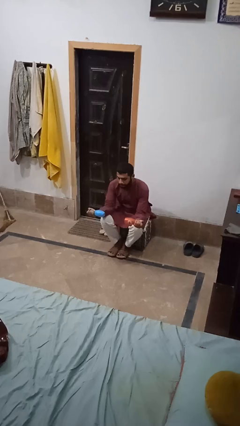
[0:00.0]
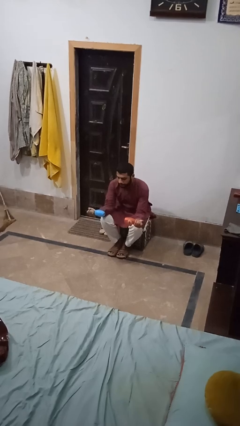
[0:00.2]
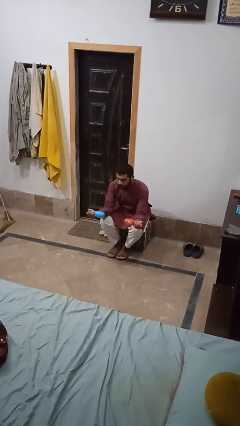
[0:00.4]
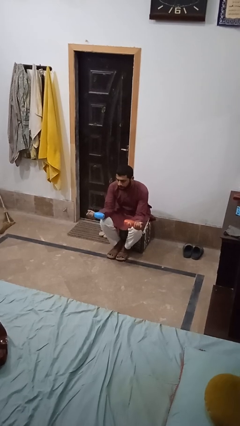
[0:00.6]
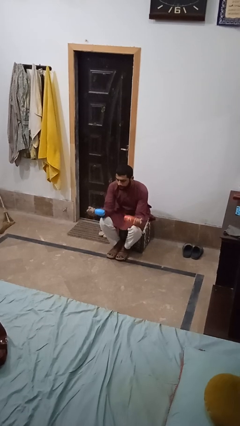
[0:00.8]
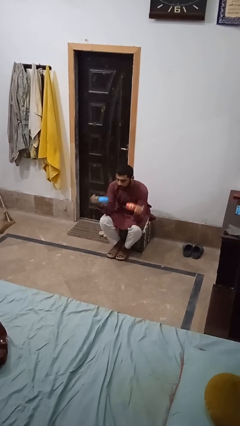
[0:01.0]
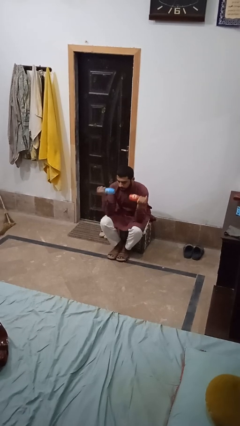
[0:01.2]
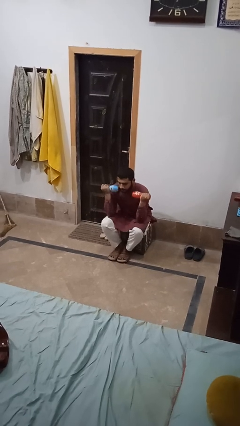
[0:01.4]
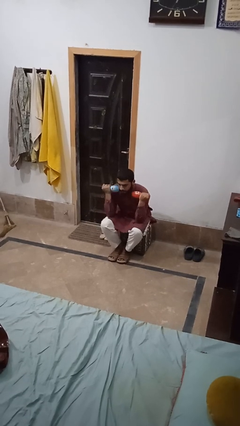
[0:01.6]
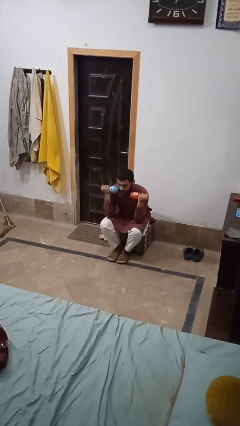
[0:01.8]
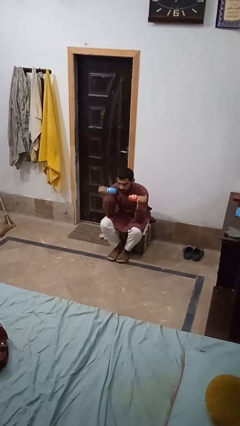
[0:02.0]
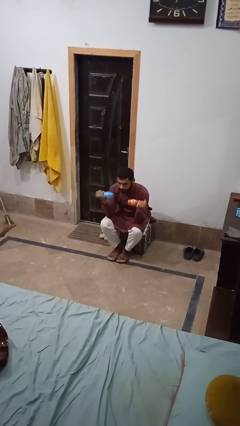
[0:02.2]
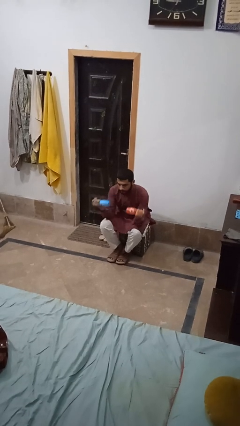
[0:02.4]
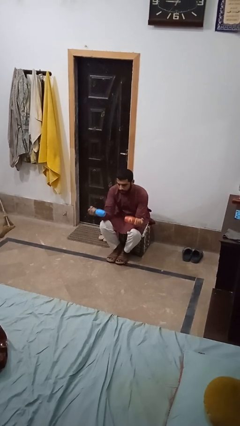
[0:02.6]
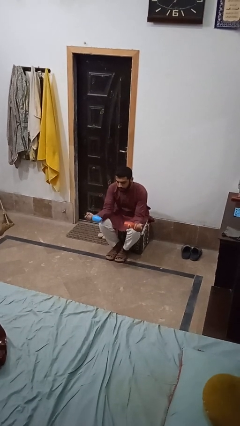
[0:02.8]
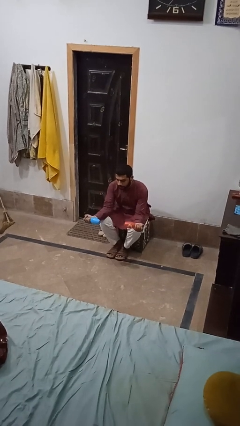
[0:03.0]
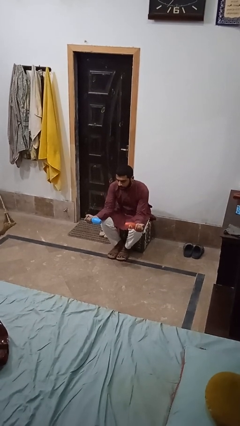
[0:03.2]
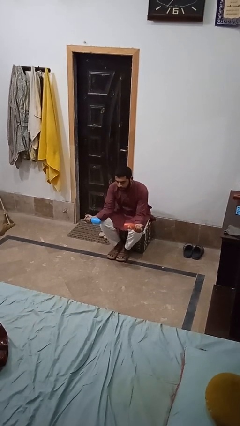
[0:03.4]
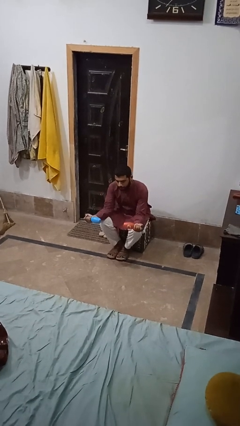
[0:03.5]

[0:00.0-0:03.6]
person lifts dumbbells

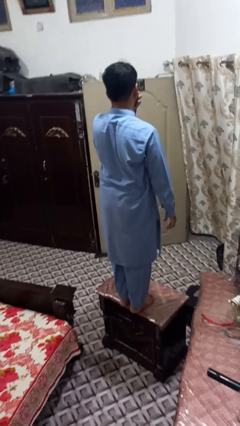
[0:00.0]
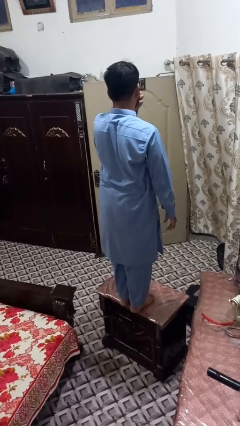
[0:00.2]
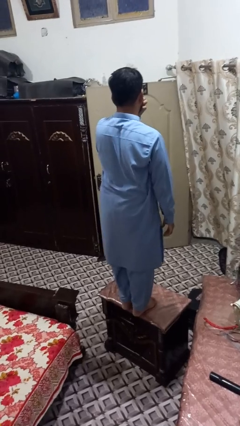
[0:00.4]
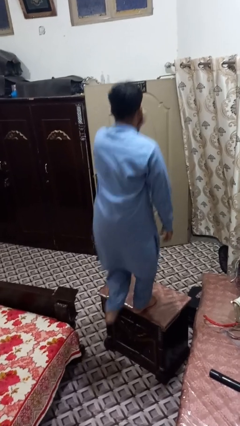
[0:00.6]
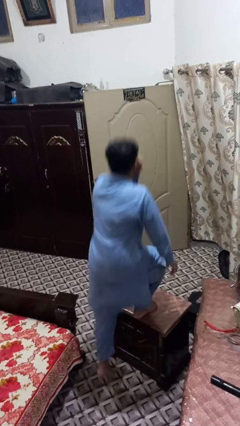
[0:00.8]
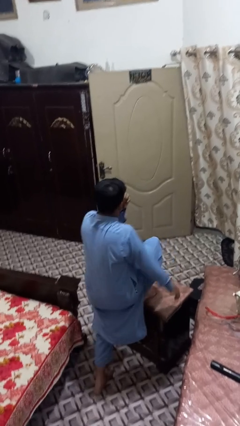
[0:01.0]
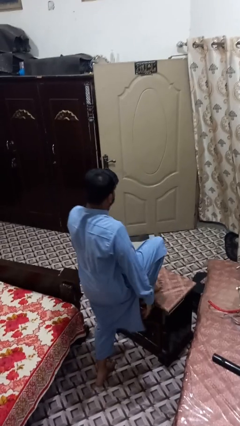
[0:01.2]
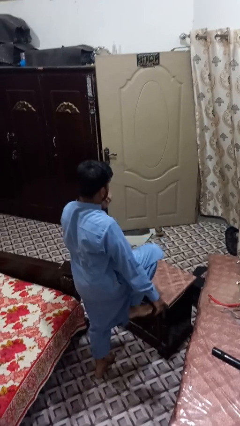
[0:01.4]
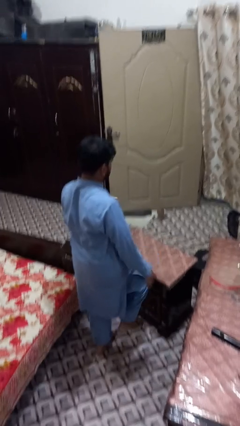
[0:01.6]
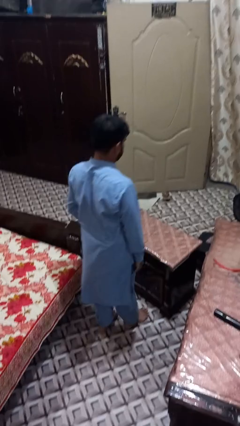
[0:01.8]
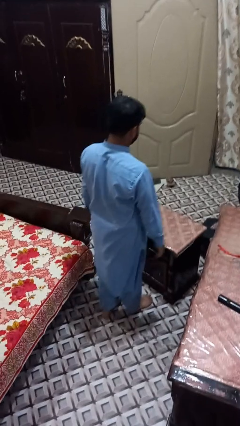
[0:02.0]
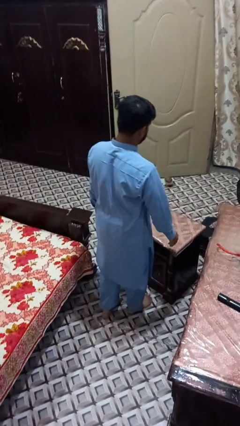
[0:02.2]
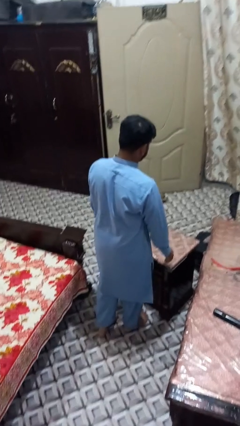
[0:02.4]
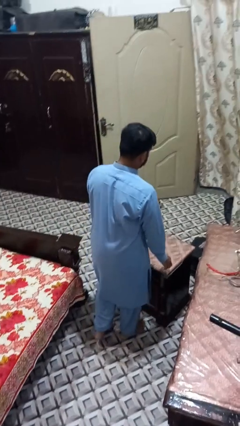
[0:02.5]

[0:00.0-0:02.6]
person climbs off table

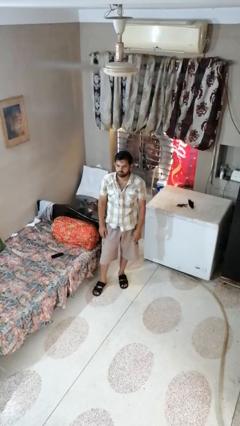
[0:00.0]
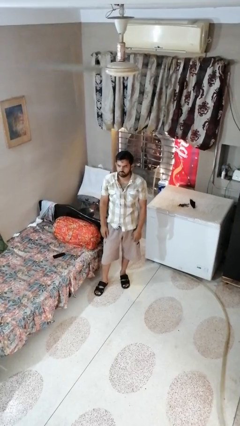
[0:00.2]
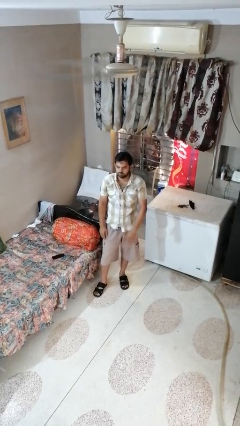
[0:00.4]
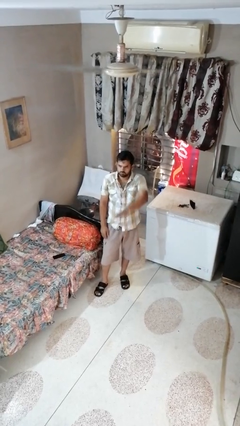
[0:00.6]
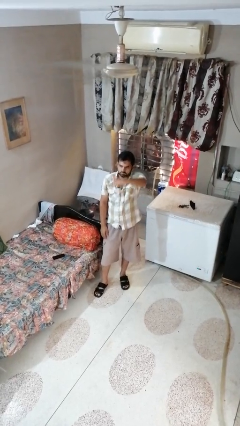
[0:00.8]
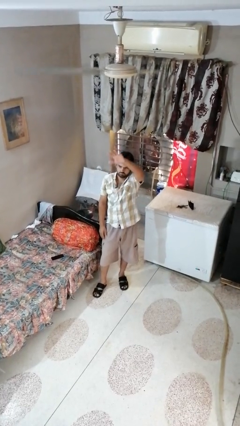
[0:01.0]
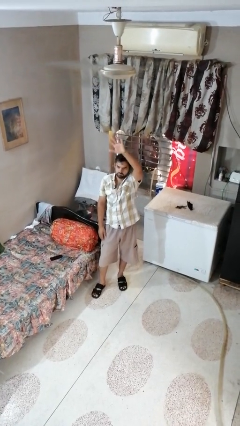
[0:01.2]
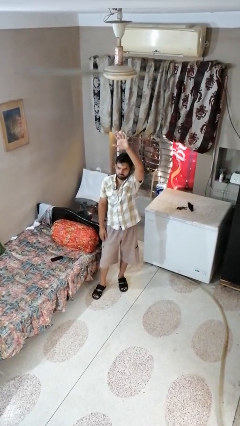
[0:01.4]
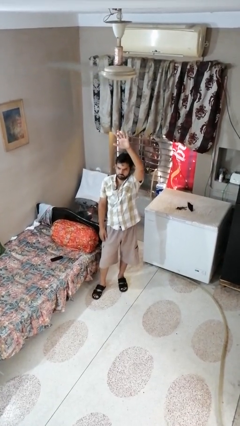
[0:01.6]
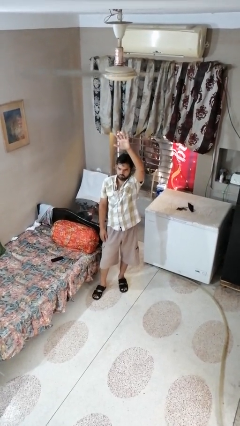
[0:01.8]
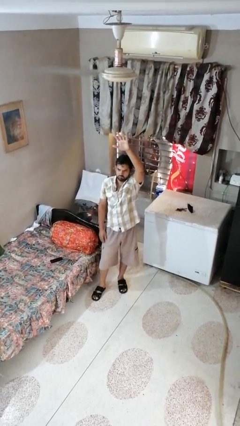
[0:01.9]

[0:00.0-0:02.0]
person gestures swipe up

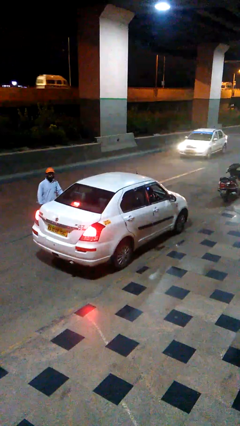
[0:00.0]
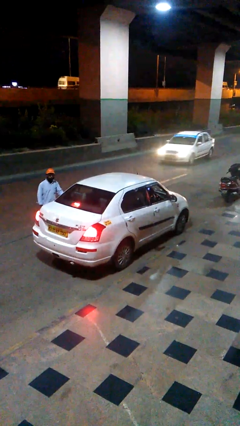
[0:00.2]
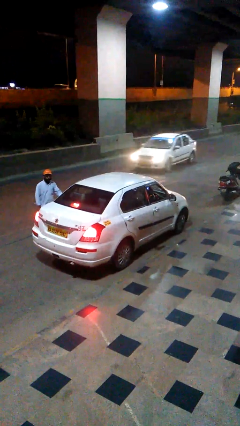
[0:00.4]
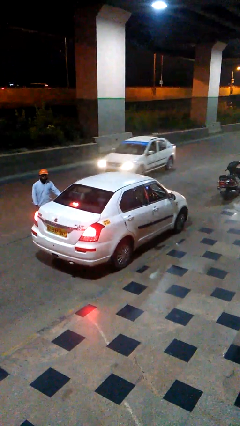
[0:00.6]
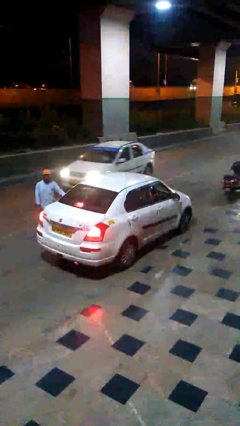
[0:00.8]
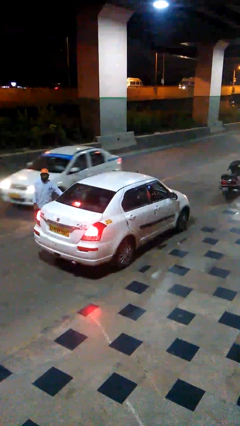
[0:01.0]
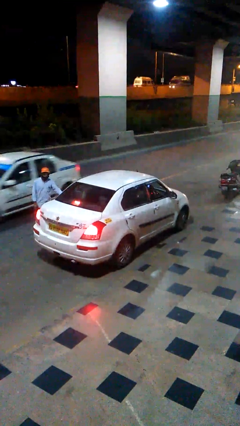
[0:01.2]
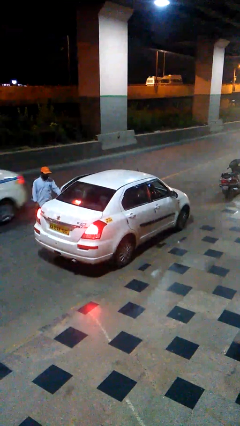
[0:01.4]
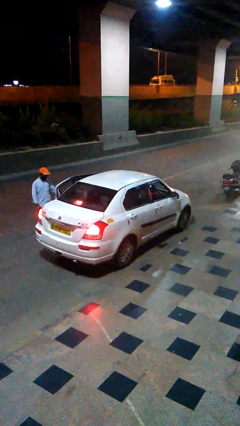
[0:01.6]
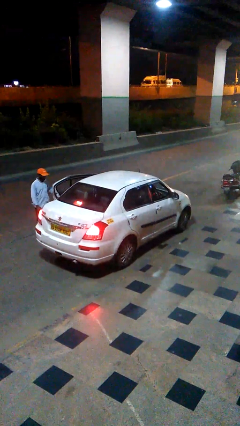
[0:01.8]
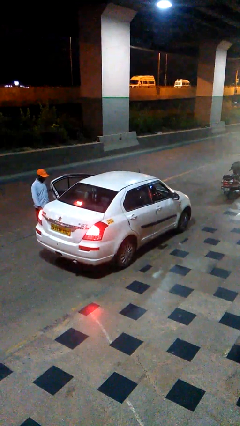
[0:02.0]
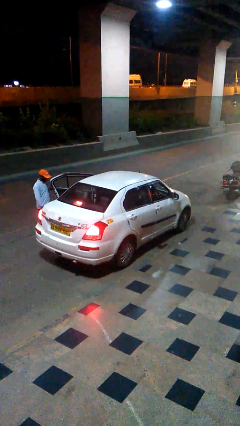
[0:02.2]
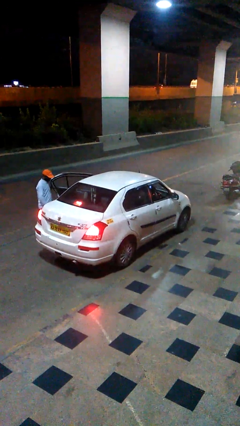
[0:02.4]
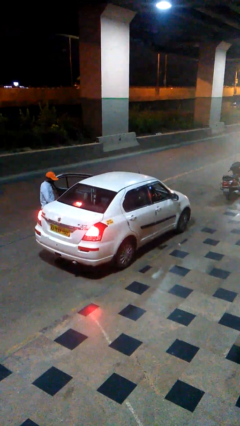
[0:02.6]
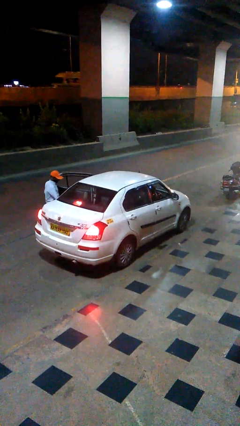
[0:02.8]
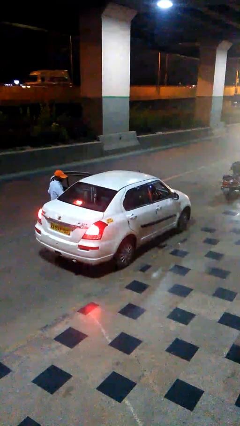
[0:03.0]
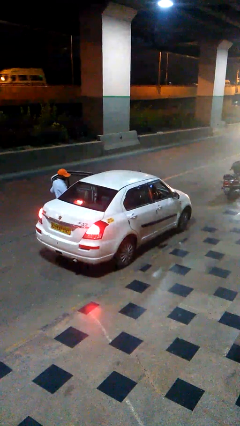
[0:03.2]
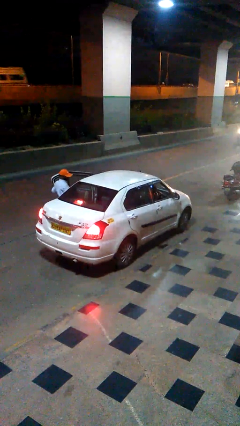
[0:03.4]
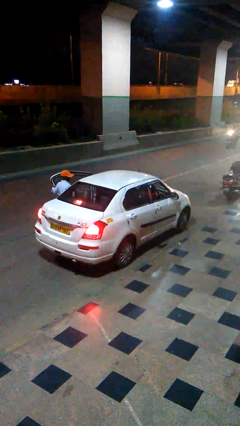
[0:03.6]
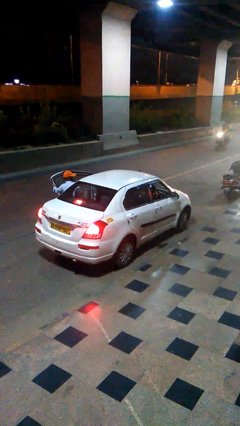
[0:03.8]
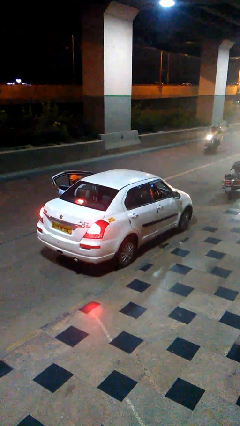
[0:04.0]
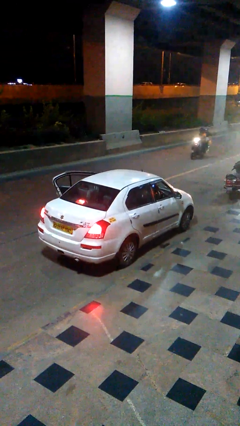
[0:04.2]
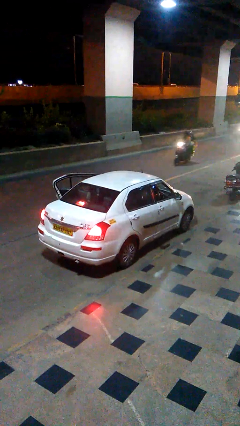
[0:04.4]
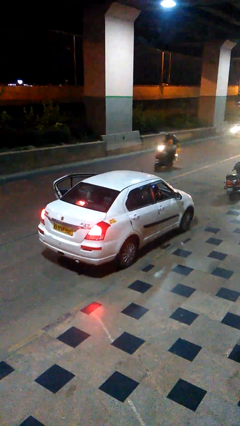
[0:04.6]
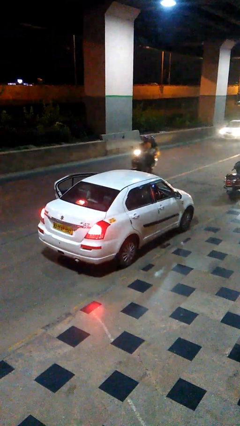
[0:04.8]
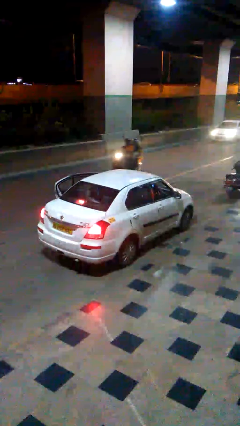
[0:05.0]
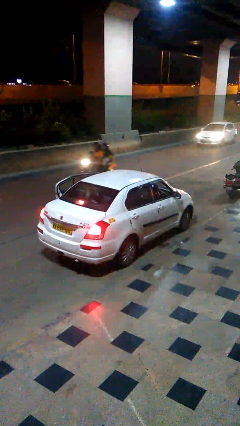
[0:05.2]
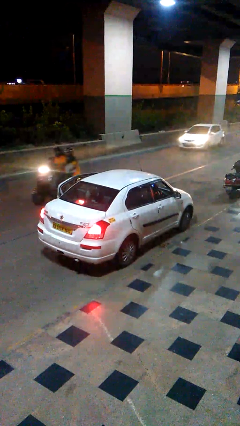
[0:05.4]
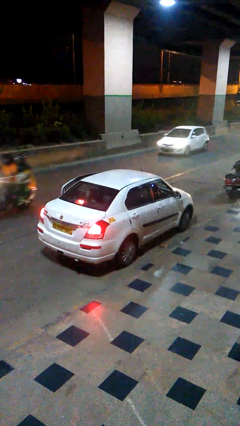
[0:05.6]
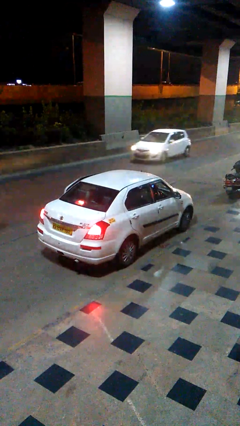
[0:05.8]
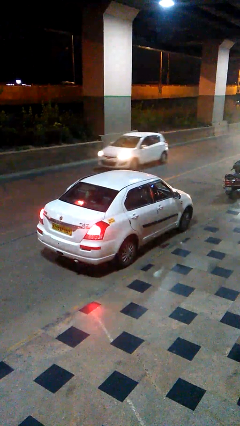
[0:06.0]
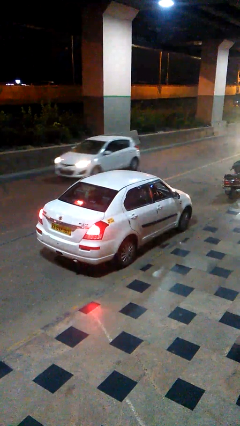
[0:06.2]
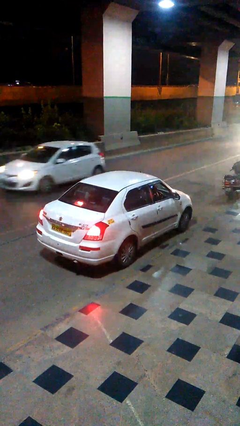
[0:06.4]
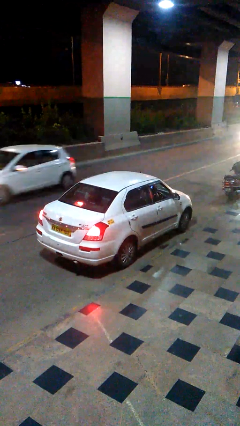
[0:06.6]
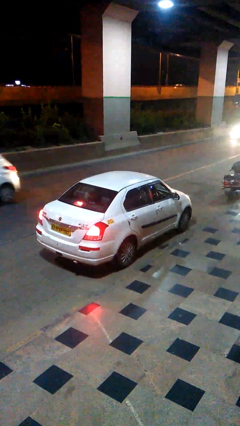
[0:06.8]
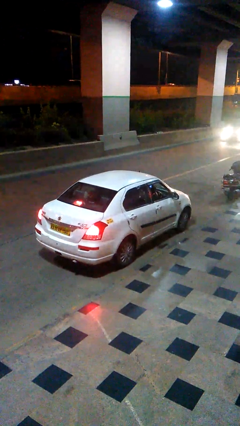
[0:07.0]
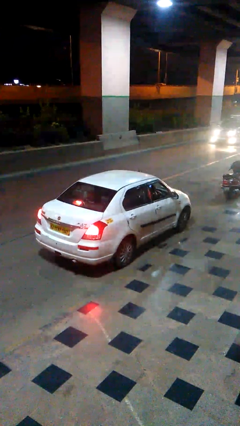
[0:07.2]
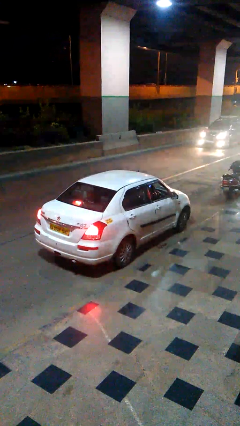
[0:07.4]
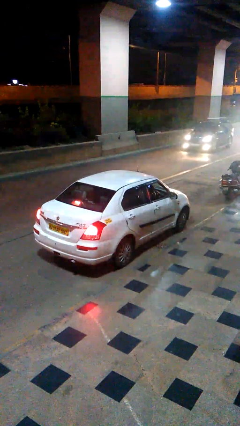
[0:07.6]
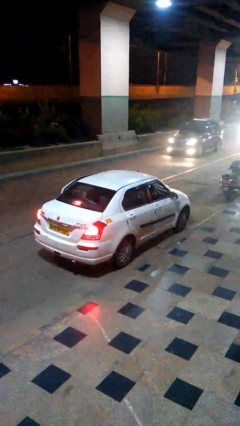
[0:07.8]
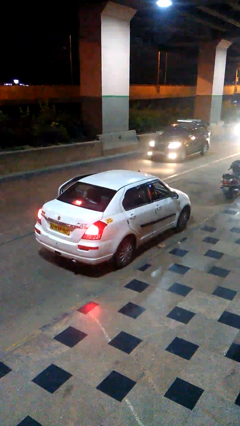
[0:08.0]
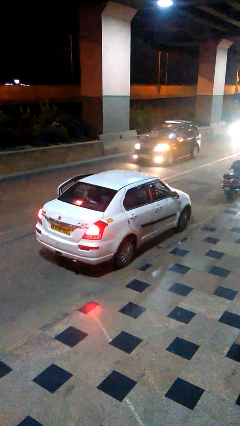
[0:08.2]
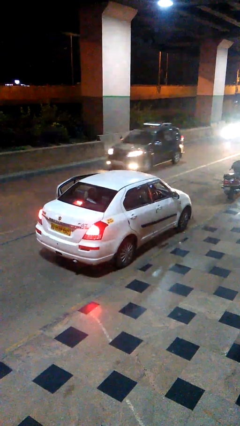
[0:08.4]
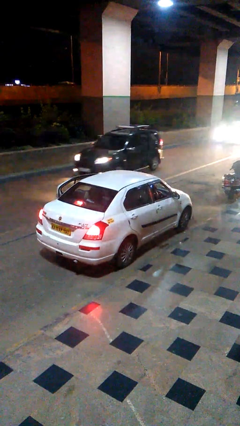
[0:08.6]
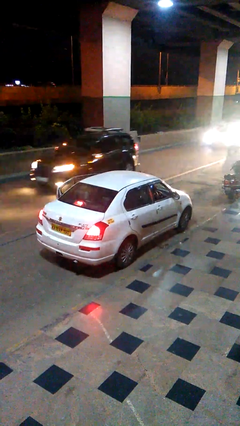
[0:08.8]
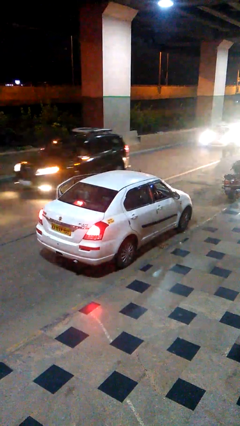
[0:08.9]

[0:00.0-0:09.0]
car picks up person

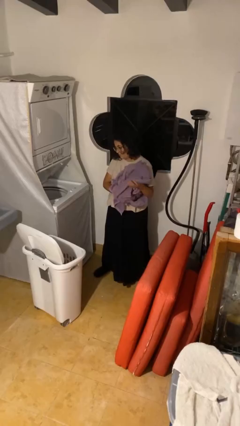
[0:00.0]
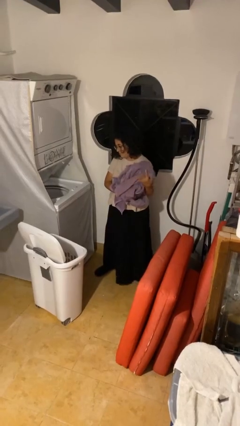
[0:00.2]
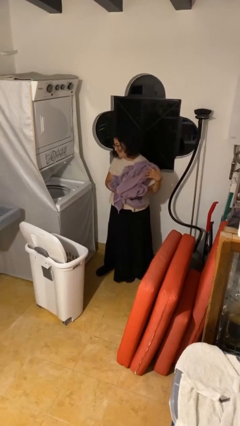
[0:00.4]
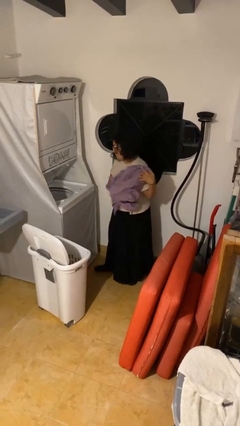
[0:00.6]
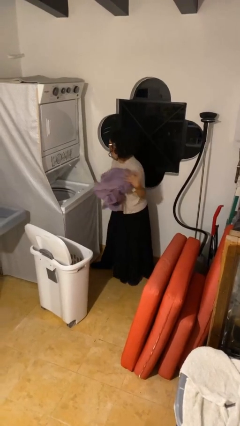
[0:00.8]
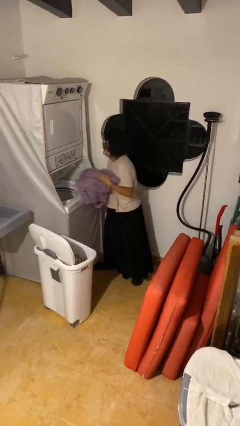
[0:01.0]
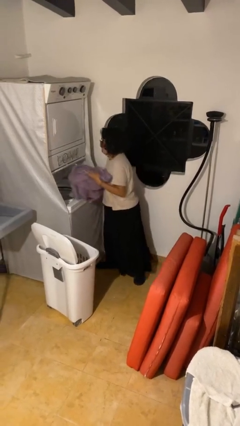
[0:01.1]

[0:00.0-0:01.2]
person loads clotheswasher
